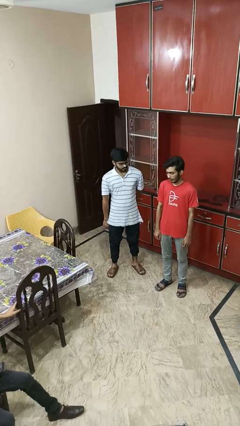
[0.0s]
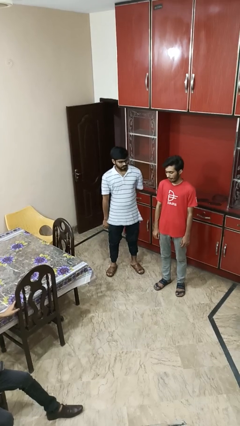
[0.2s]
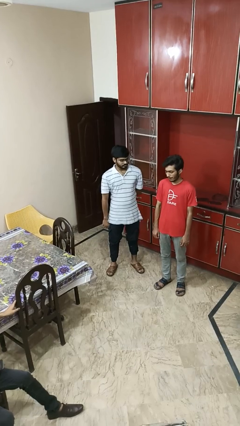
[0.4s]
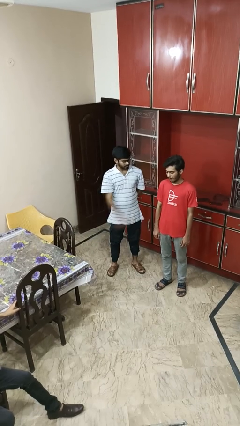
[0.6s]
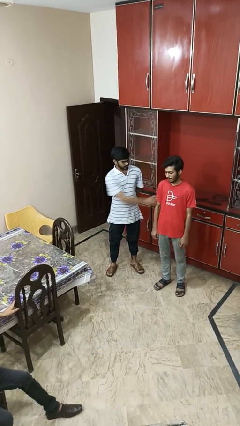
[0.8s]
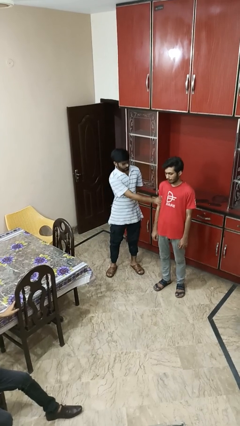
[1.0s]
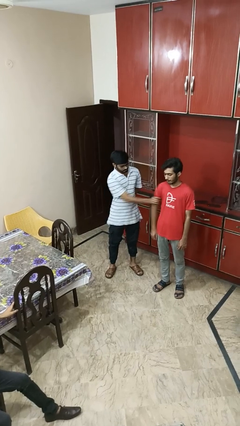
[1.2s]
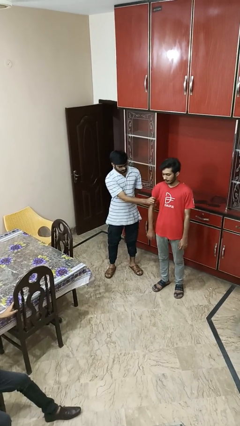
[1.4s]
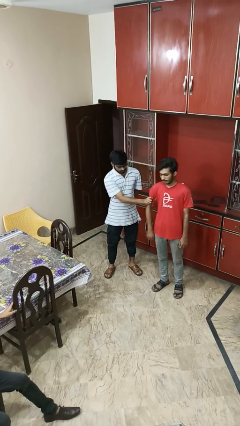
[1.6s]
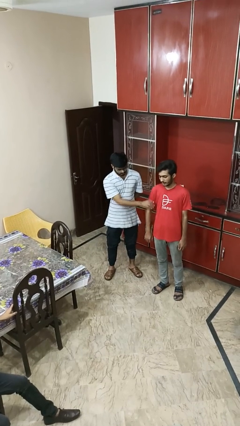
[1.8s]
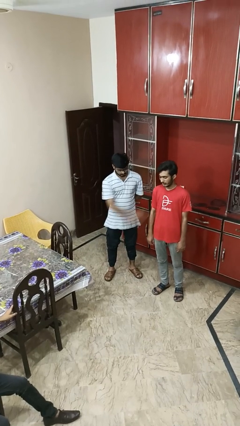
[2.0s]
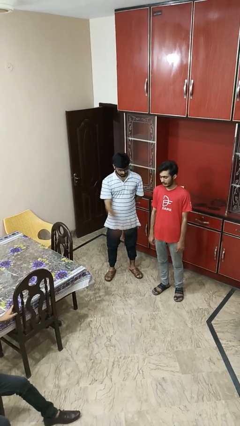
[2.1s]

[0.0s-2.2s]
person grabs person by bicep

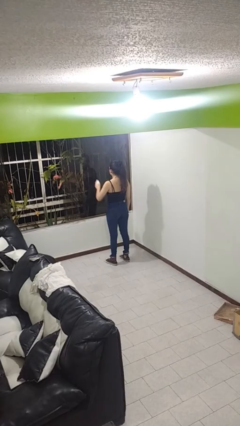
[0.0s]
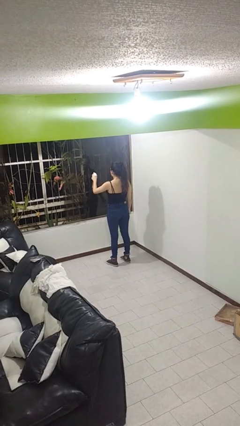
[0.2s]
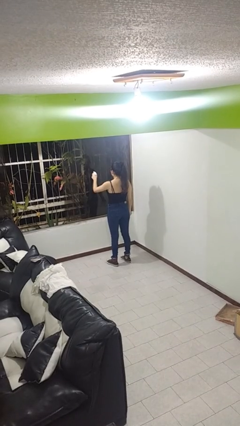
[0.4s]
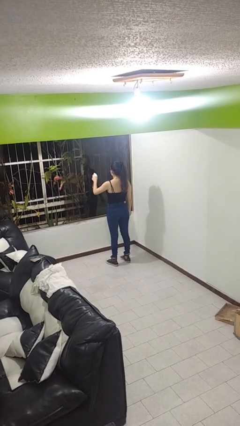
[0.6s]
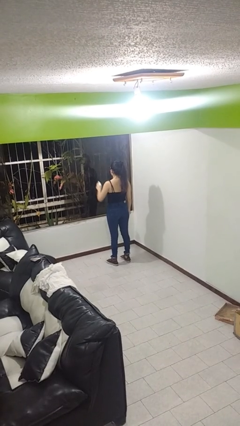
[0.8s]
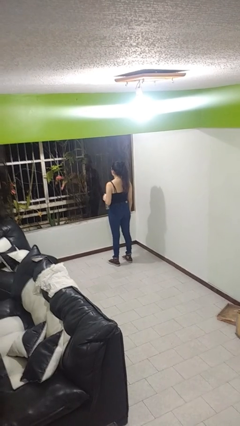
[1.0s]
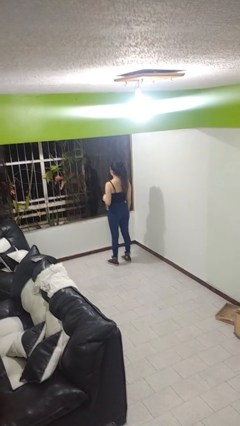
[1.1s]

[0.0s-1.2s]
person sprays from bottle

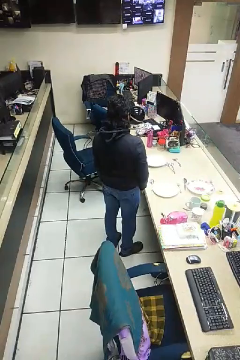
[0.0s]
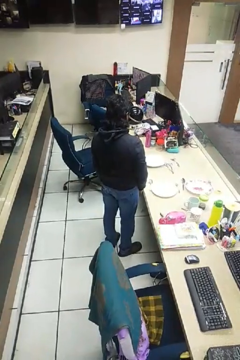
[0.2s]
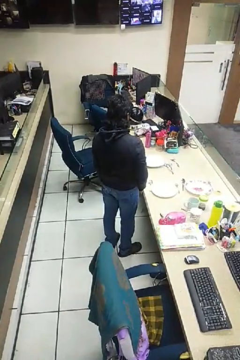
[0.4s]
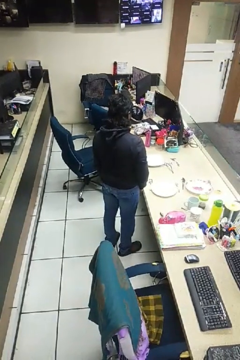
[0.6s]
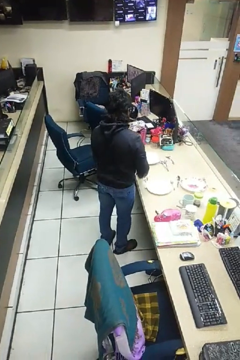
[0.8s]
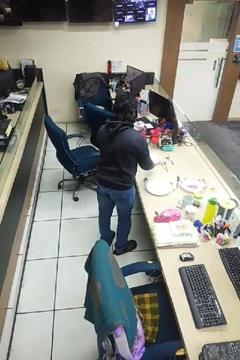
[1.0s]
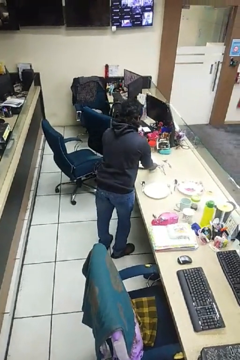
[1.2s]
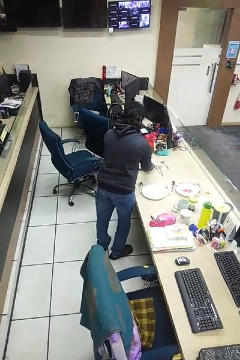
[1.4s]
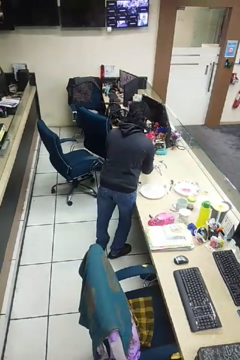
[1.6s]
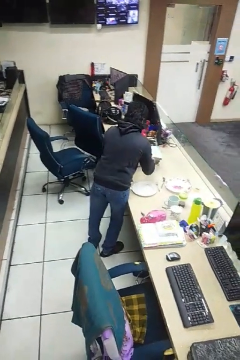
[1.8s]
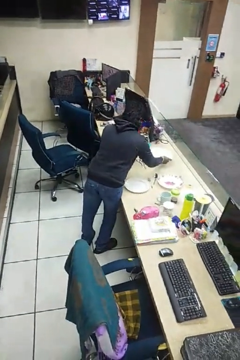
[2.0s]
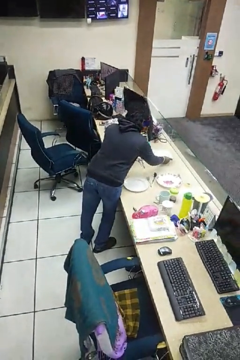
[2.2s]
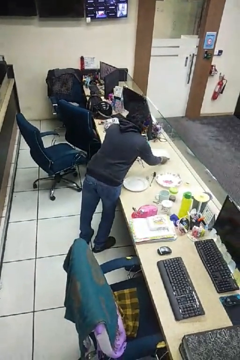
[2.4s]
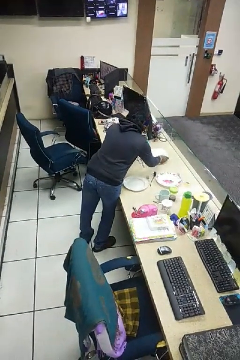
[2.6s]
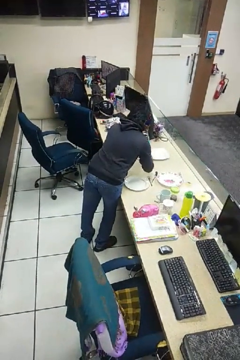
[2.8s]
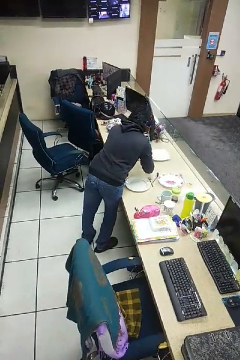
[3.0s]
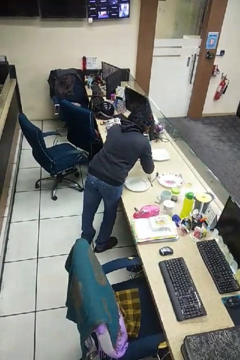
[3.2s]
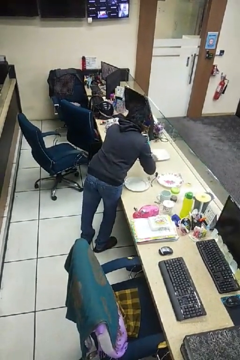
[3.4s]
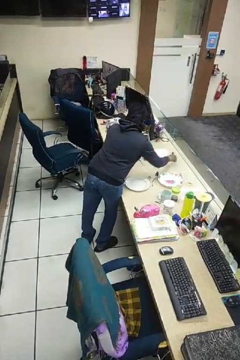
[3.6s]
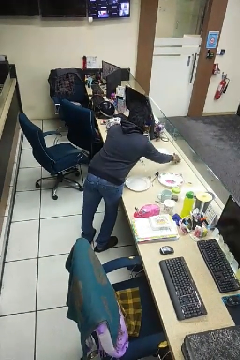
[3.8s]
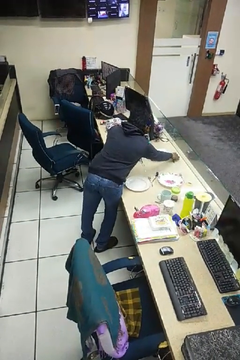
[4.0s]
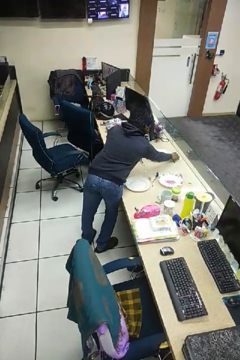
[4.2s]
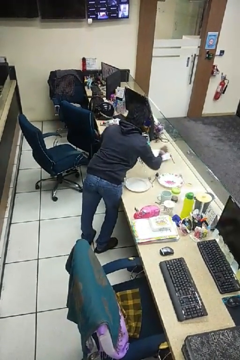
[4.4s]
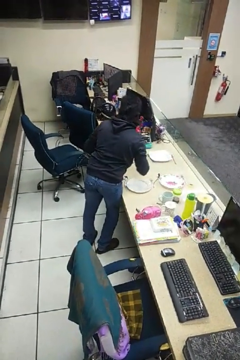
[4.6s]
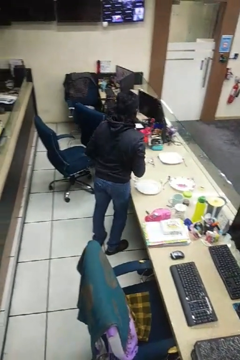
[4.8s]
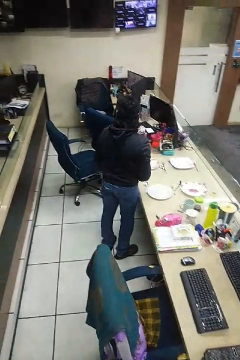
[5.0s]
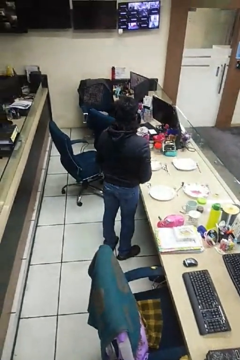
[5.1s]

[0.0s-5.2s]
person sets table

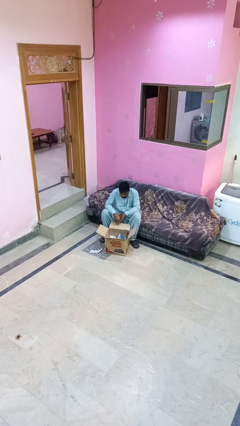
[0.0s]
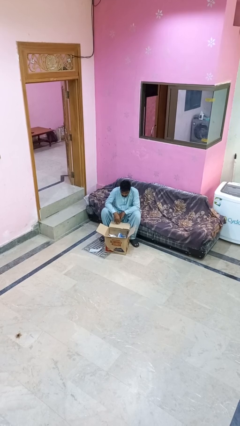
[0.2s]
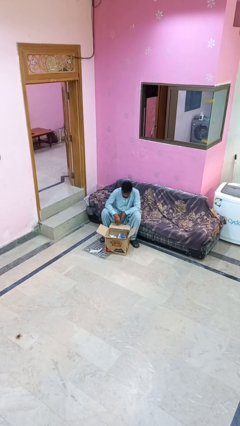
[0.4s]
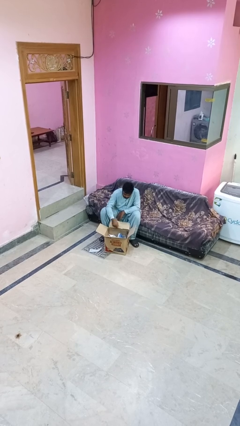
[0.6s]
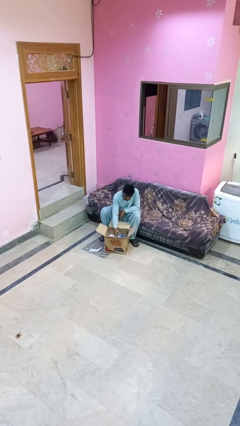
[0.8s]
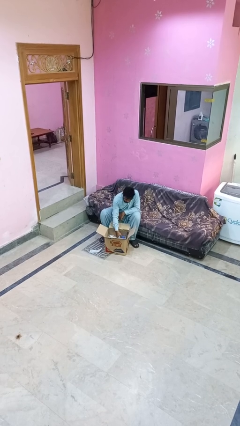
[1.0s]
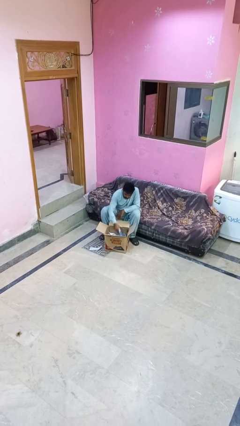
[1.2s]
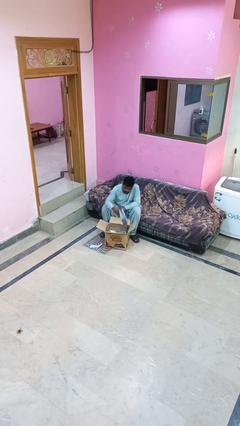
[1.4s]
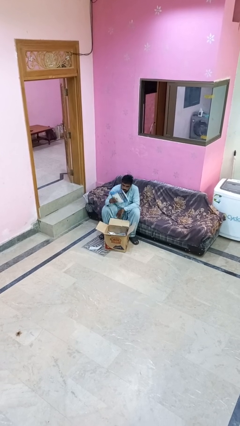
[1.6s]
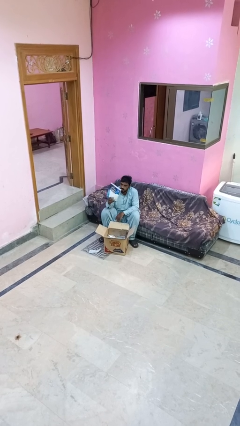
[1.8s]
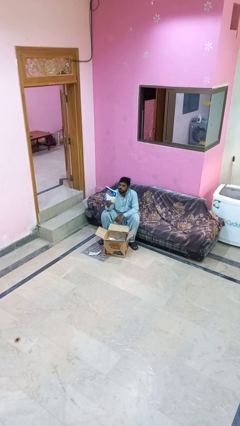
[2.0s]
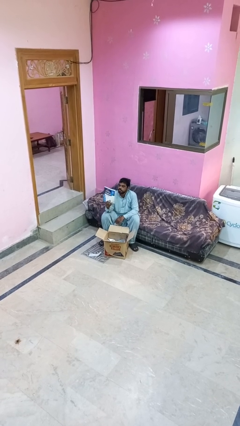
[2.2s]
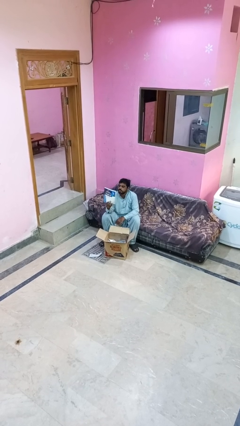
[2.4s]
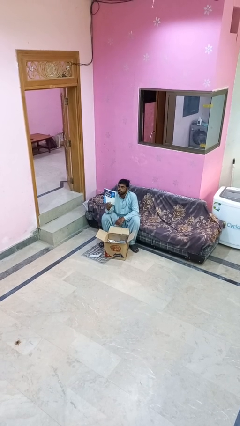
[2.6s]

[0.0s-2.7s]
person takes object from box

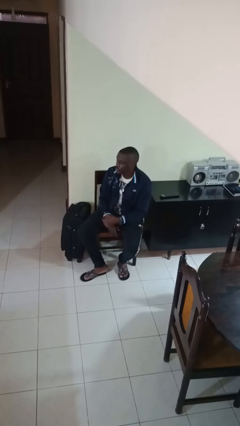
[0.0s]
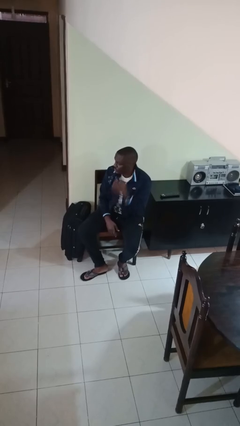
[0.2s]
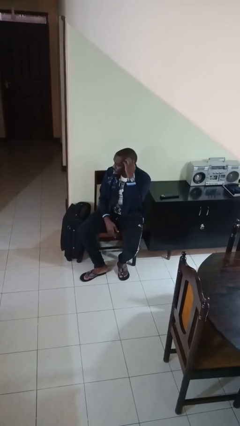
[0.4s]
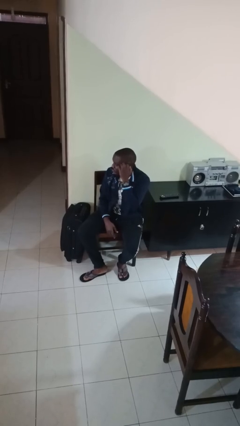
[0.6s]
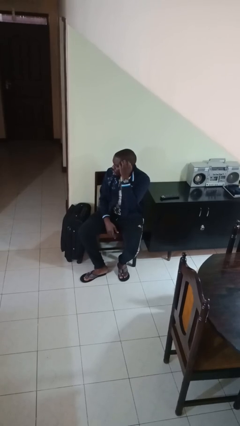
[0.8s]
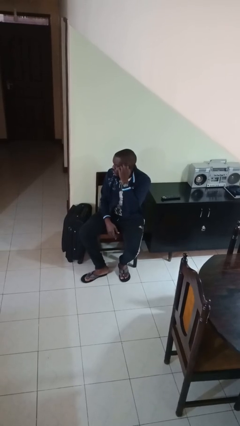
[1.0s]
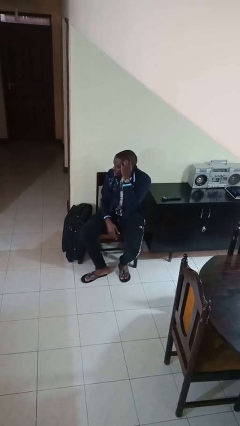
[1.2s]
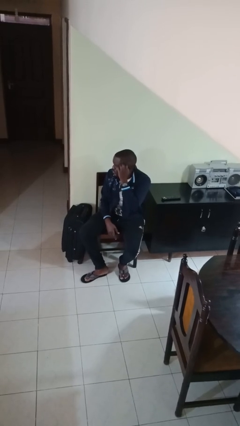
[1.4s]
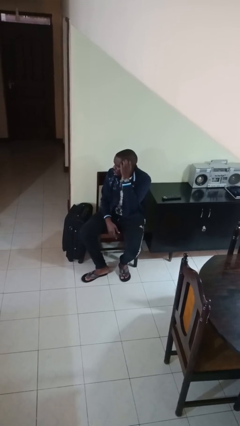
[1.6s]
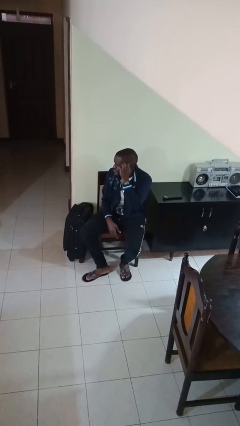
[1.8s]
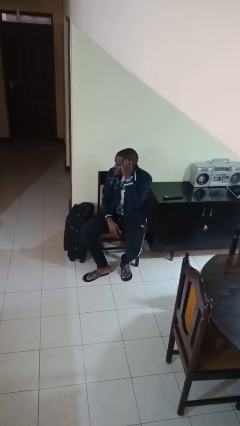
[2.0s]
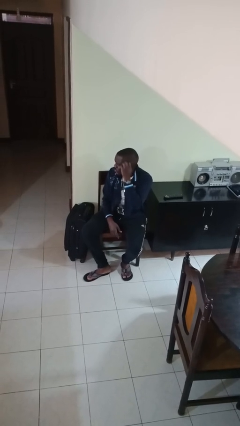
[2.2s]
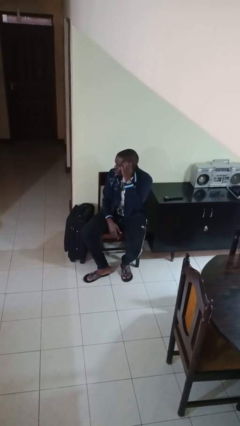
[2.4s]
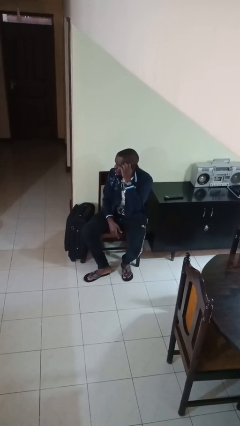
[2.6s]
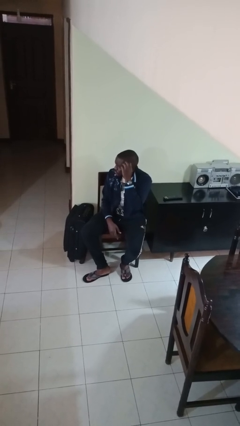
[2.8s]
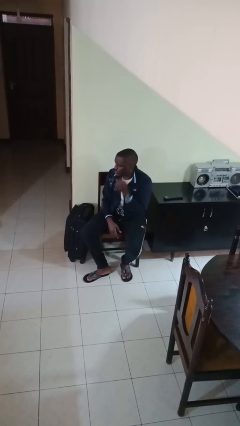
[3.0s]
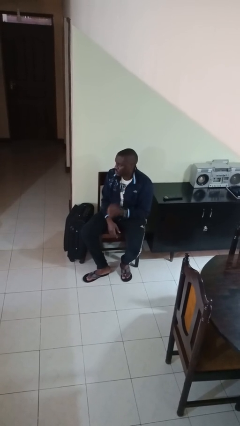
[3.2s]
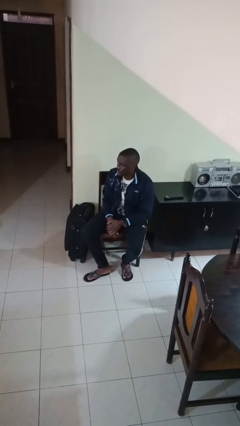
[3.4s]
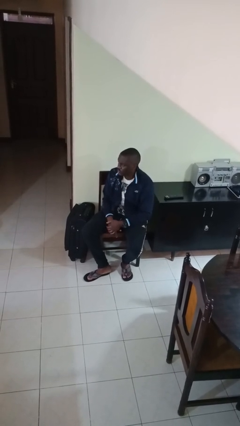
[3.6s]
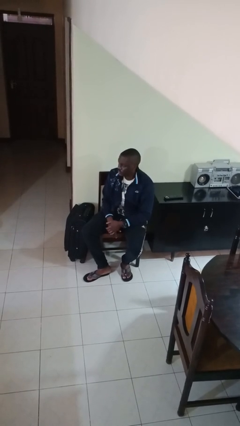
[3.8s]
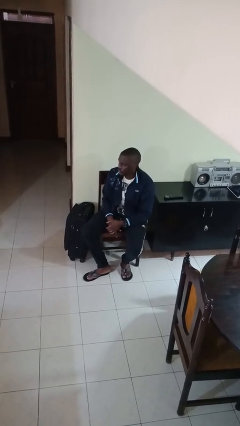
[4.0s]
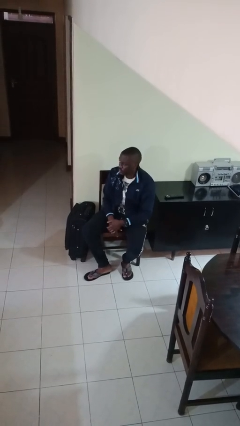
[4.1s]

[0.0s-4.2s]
person scratches face

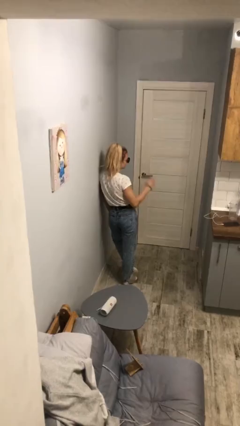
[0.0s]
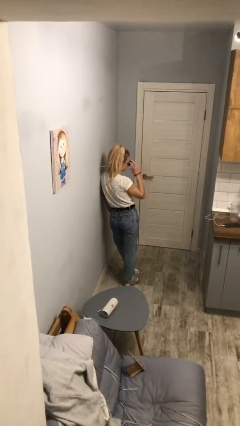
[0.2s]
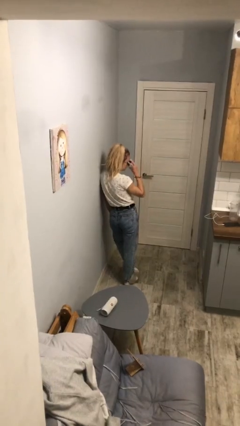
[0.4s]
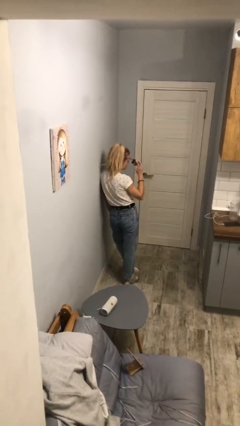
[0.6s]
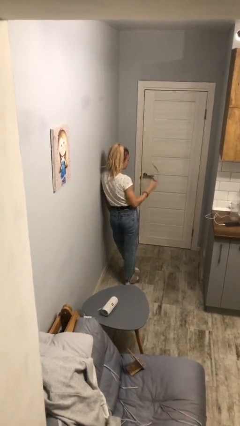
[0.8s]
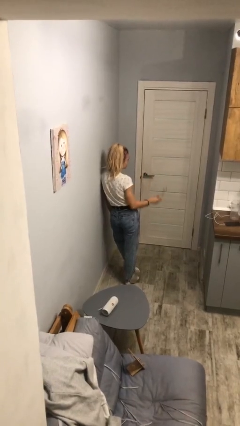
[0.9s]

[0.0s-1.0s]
person takes off glasses

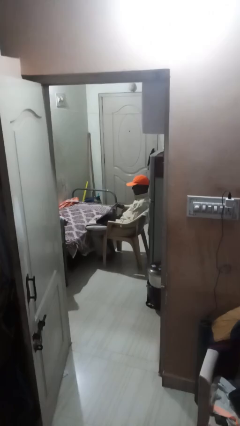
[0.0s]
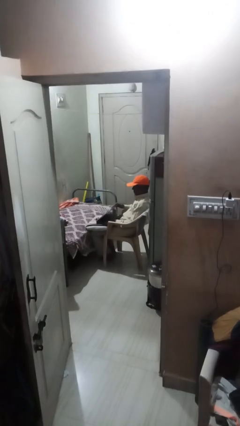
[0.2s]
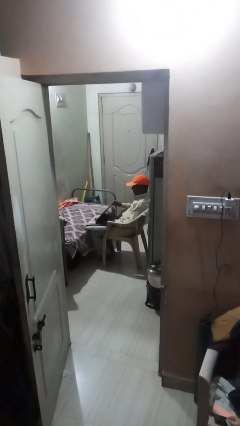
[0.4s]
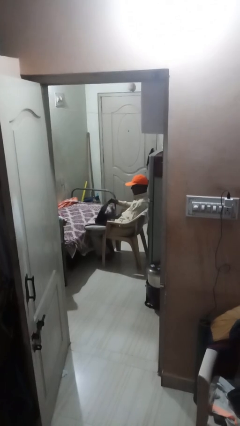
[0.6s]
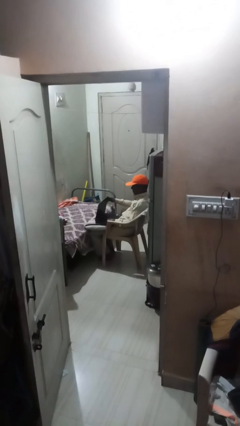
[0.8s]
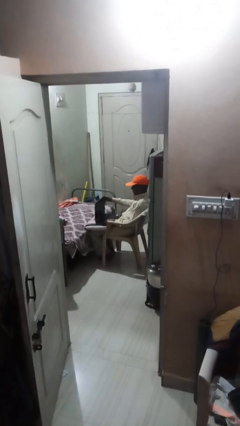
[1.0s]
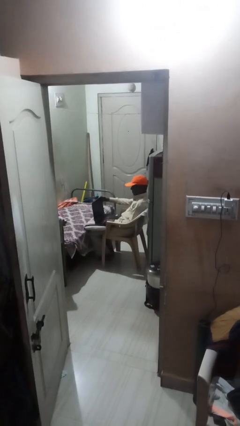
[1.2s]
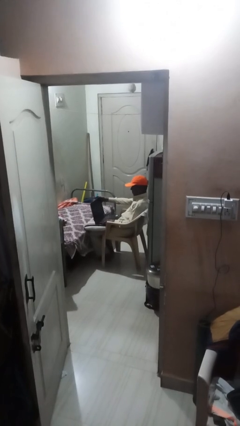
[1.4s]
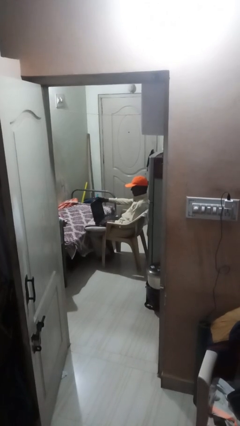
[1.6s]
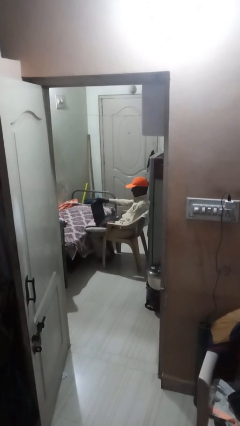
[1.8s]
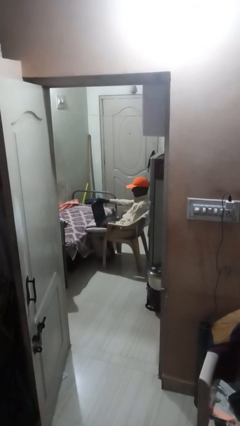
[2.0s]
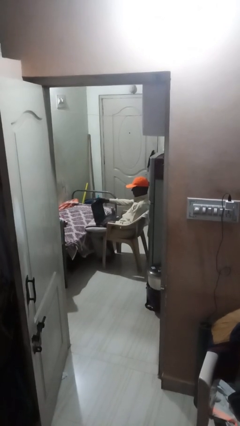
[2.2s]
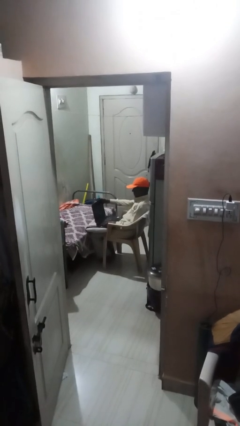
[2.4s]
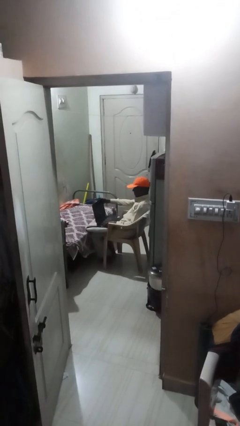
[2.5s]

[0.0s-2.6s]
person interacts with laptop
